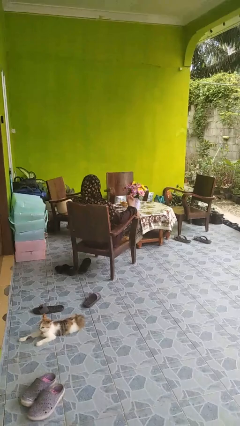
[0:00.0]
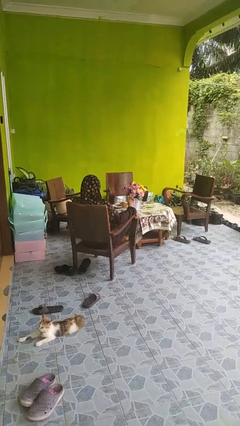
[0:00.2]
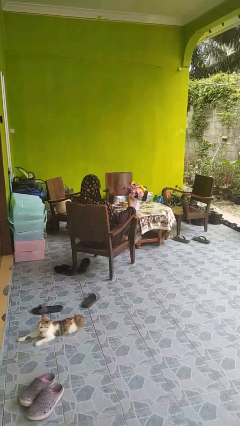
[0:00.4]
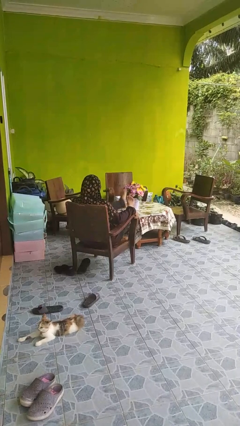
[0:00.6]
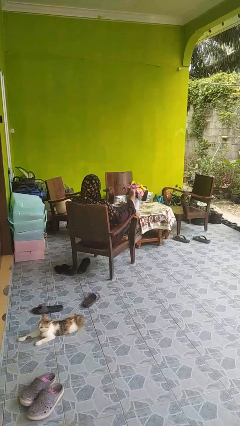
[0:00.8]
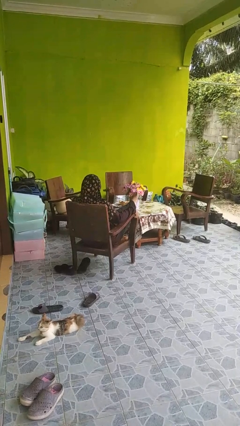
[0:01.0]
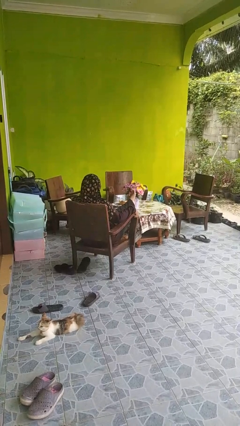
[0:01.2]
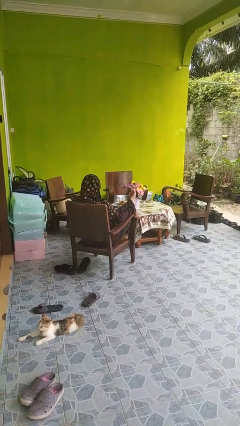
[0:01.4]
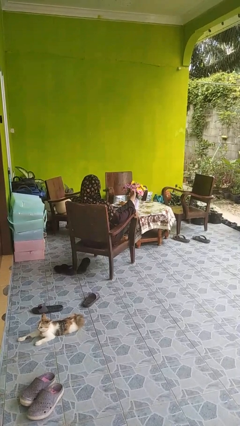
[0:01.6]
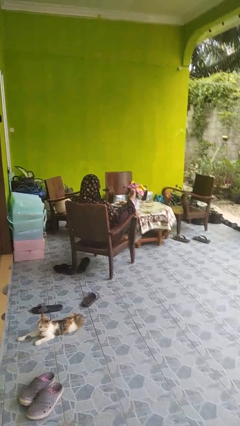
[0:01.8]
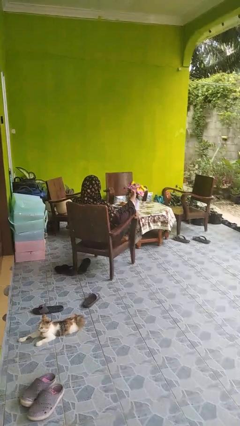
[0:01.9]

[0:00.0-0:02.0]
person puts feet up

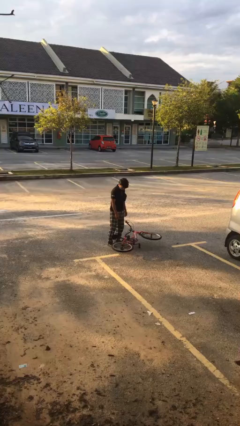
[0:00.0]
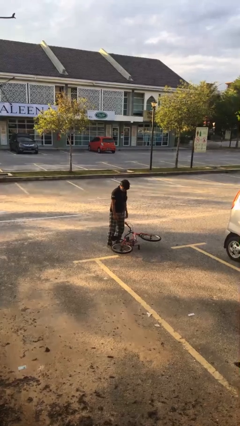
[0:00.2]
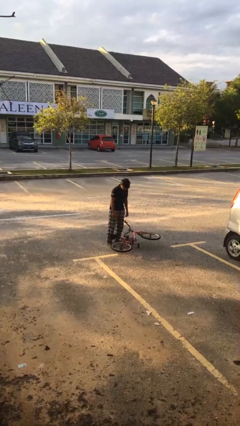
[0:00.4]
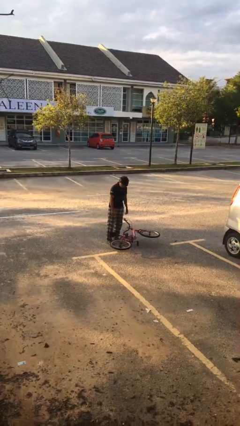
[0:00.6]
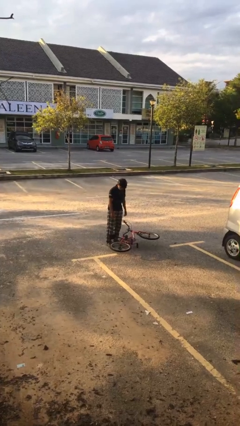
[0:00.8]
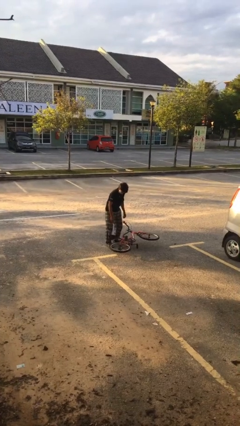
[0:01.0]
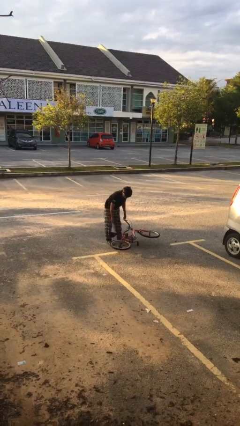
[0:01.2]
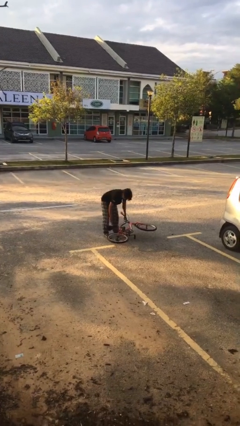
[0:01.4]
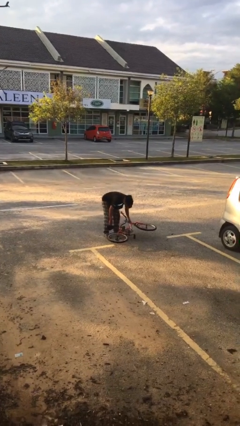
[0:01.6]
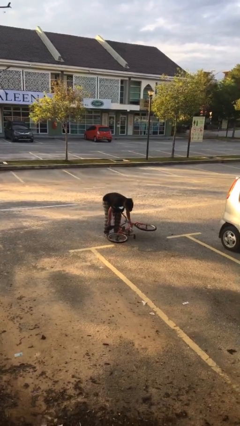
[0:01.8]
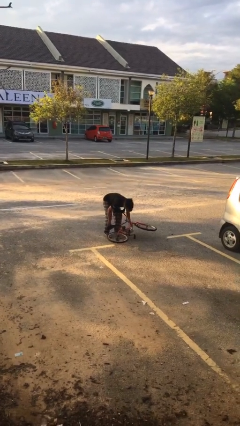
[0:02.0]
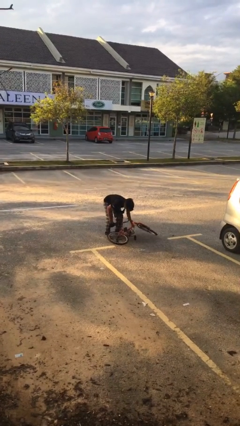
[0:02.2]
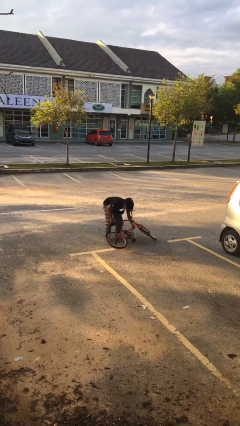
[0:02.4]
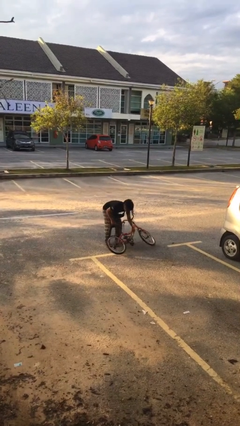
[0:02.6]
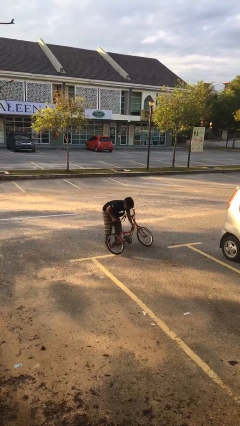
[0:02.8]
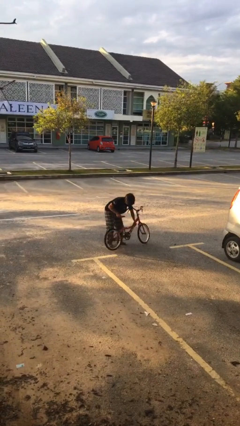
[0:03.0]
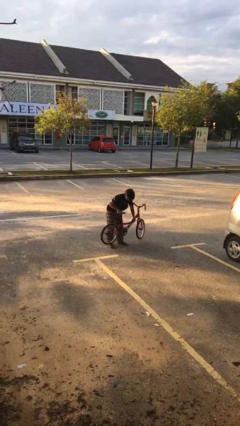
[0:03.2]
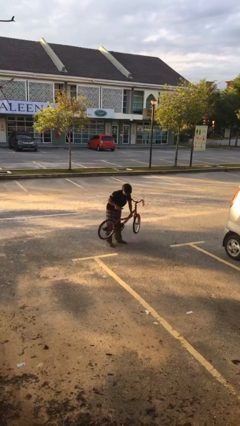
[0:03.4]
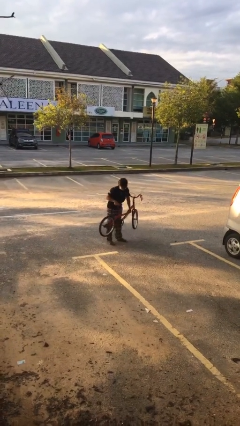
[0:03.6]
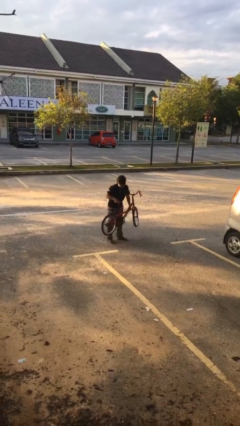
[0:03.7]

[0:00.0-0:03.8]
person picks up object from floor

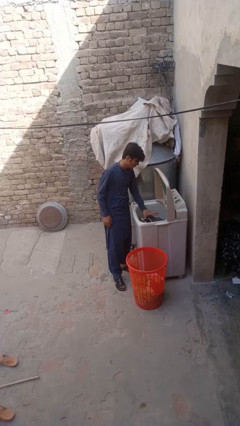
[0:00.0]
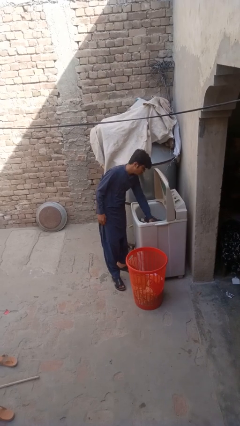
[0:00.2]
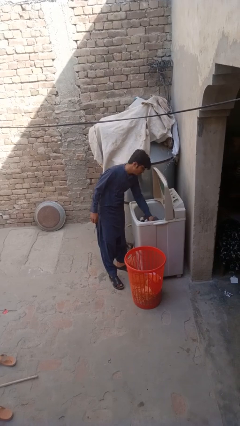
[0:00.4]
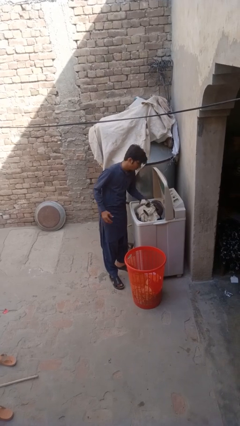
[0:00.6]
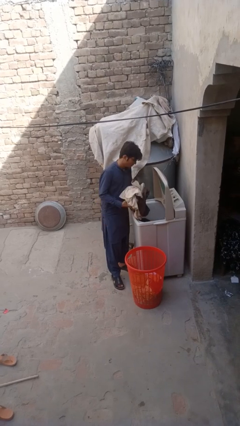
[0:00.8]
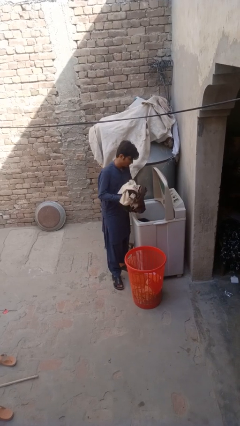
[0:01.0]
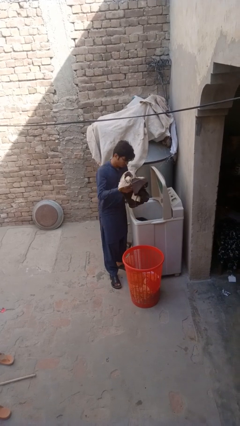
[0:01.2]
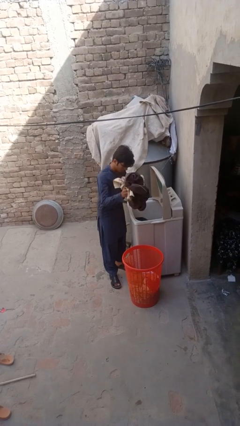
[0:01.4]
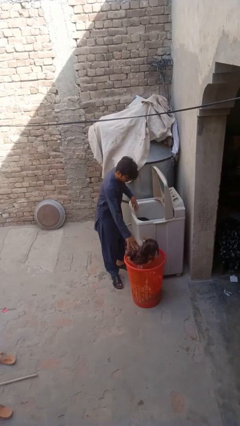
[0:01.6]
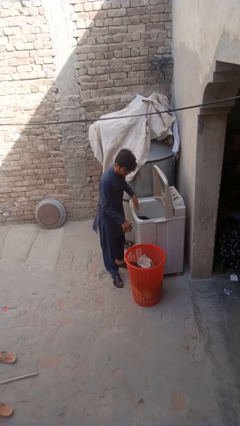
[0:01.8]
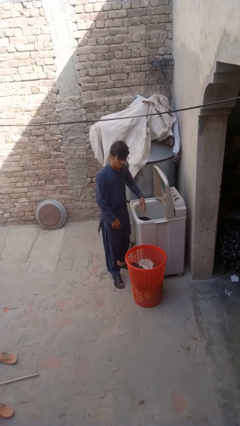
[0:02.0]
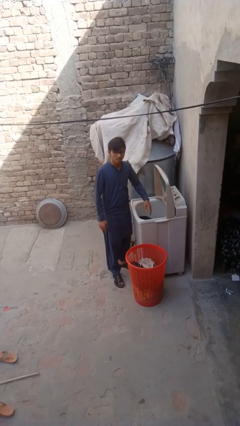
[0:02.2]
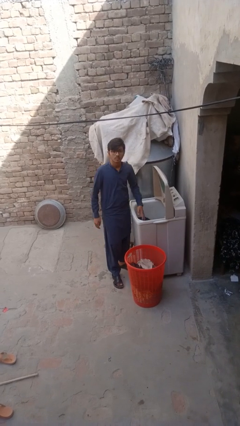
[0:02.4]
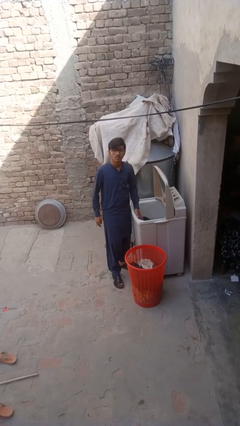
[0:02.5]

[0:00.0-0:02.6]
person unloads clotheswasher

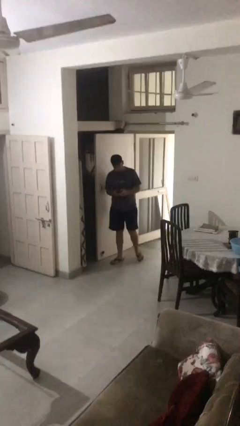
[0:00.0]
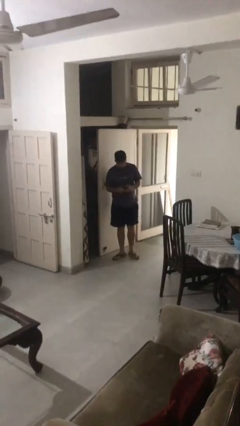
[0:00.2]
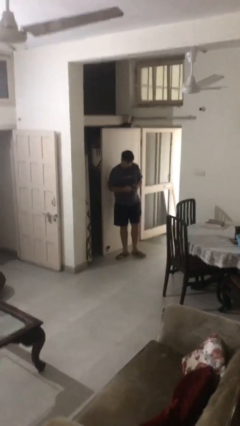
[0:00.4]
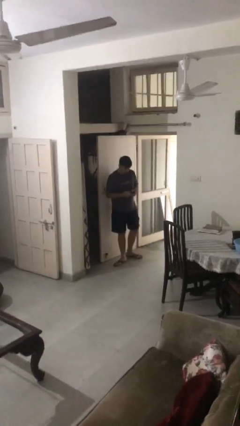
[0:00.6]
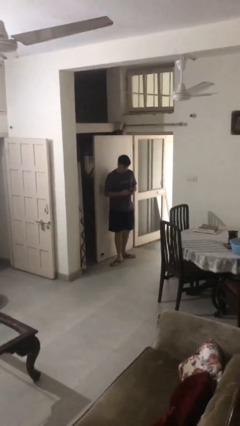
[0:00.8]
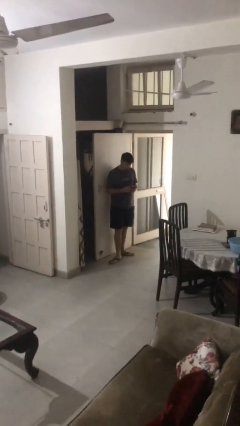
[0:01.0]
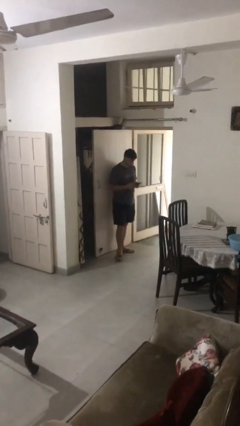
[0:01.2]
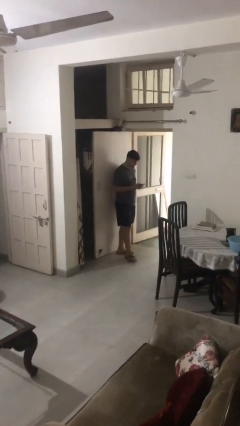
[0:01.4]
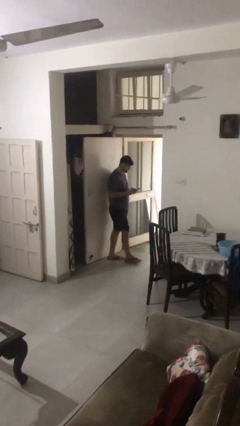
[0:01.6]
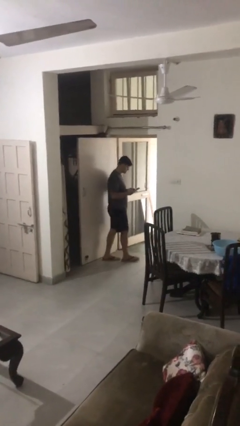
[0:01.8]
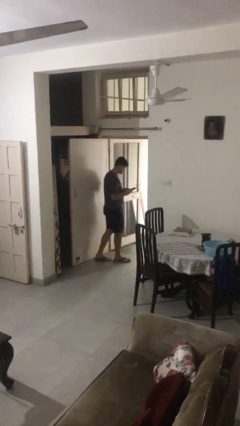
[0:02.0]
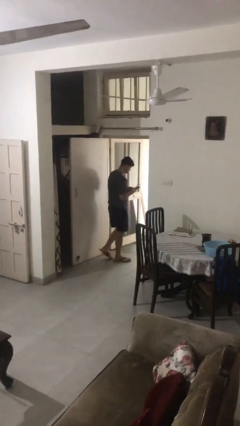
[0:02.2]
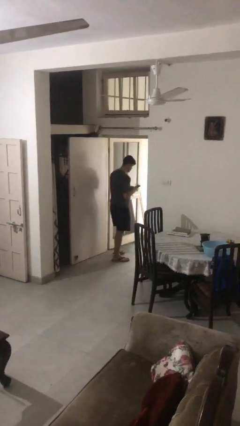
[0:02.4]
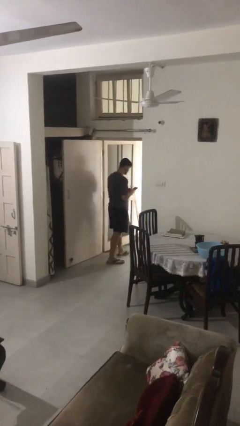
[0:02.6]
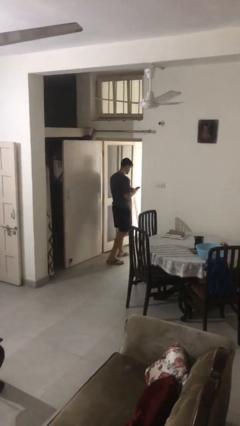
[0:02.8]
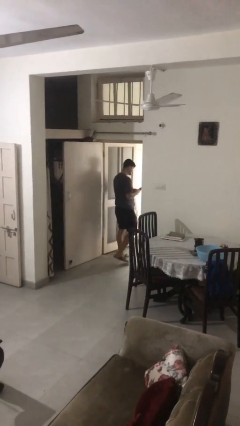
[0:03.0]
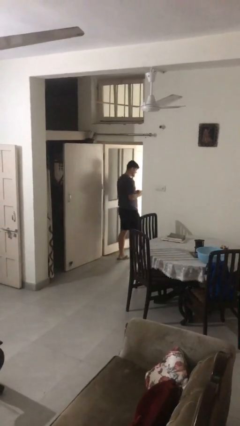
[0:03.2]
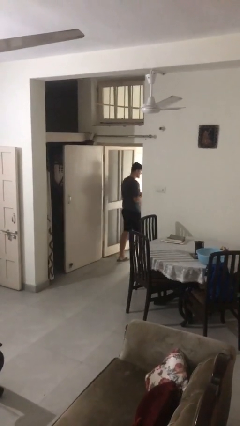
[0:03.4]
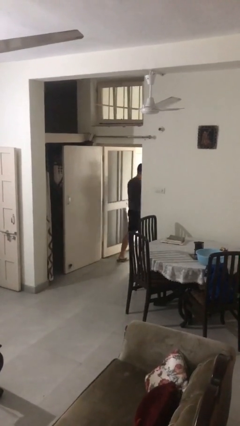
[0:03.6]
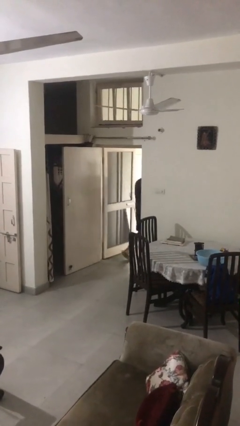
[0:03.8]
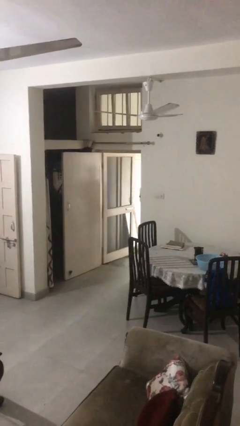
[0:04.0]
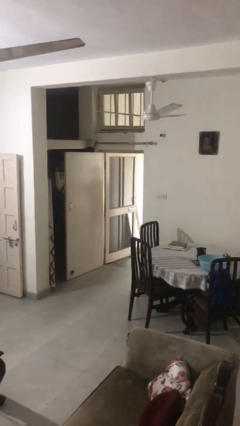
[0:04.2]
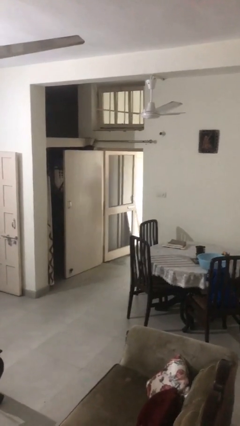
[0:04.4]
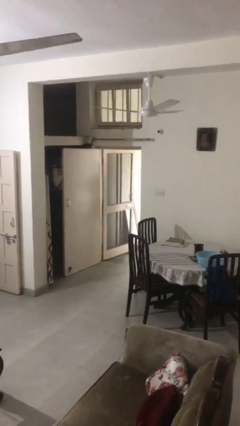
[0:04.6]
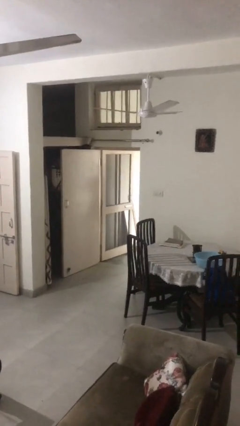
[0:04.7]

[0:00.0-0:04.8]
person exits scene through structure

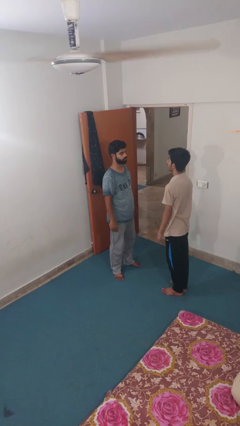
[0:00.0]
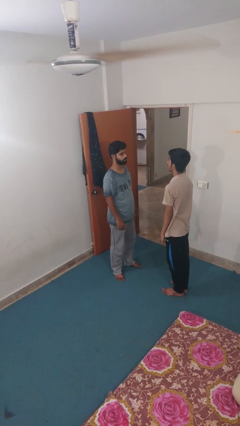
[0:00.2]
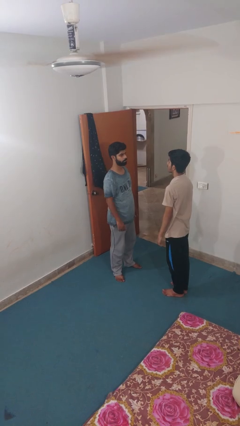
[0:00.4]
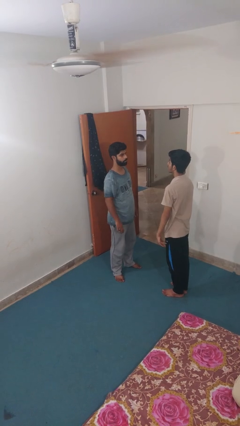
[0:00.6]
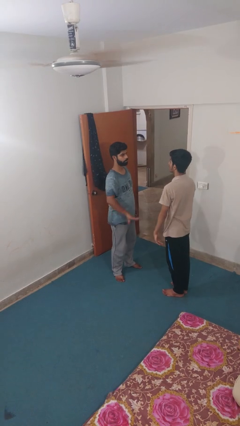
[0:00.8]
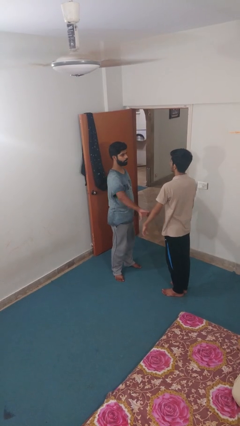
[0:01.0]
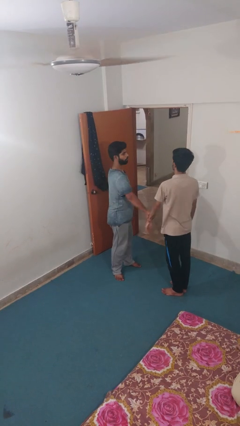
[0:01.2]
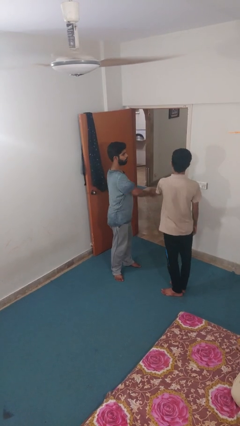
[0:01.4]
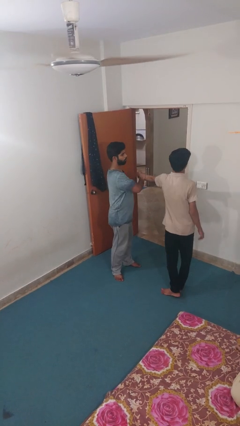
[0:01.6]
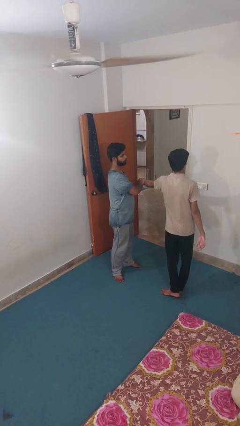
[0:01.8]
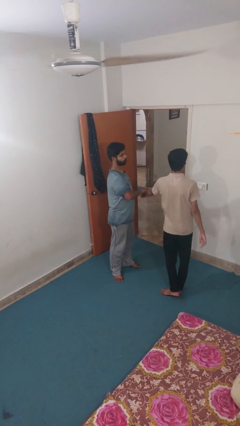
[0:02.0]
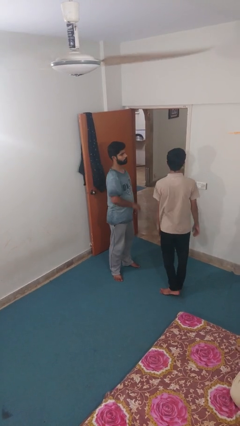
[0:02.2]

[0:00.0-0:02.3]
person grabs person by forearm

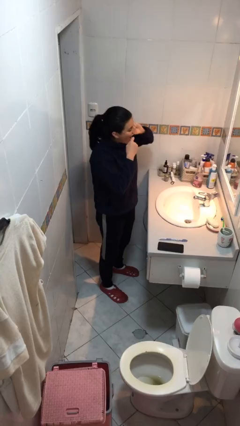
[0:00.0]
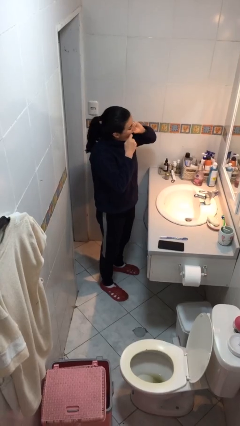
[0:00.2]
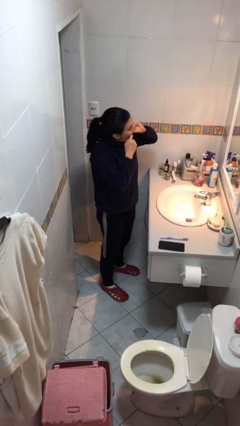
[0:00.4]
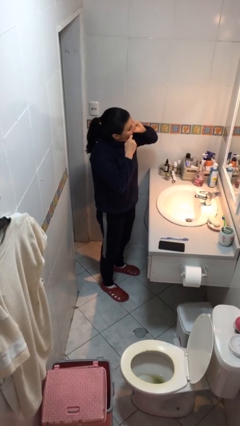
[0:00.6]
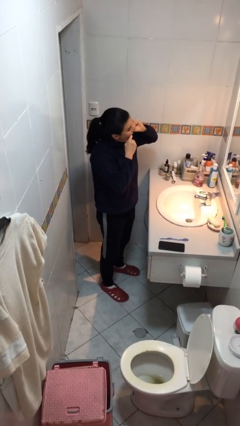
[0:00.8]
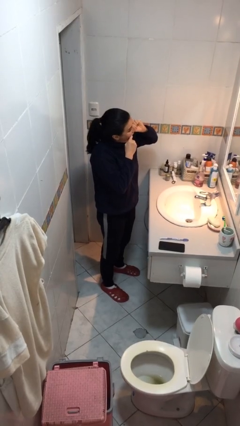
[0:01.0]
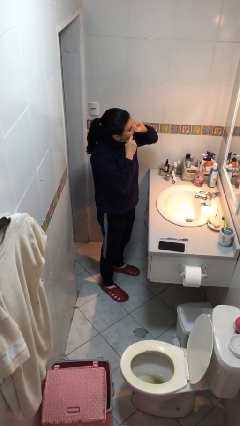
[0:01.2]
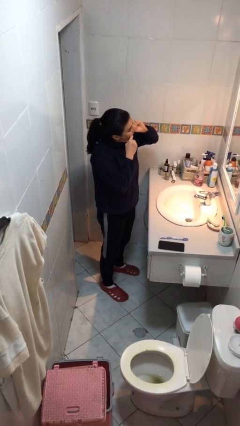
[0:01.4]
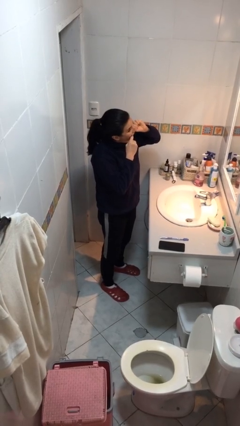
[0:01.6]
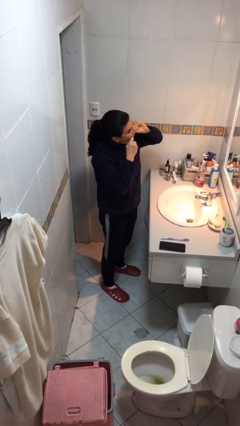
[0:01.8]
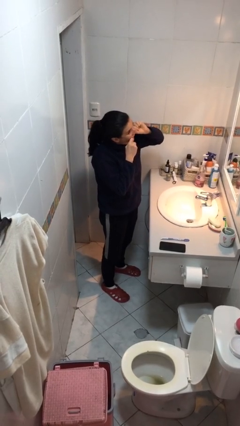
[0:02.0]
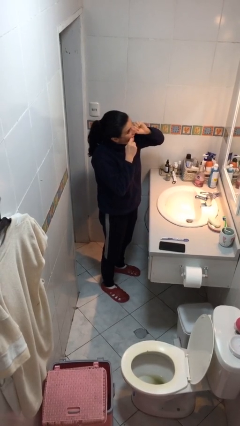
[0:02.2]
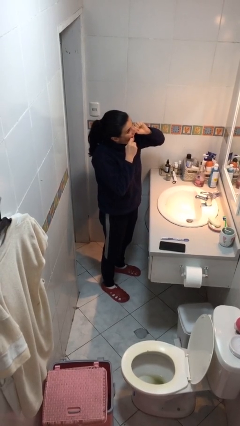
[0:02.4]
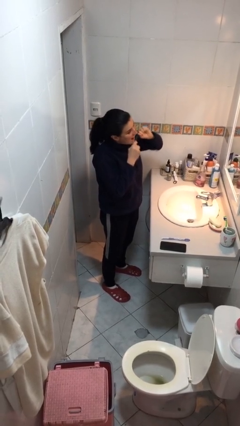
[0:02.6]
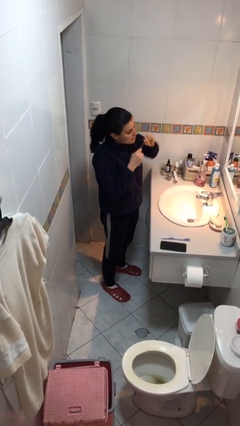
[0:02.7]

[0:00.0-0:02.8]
person flosses
